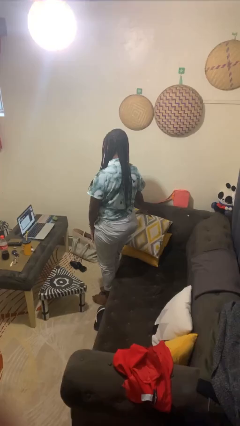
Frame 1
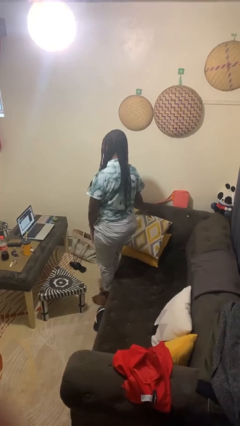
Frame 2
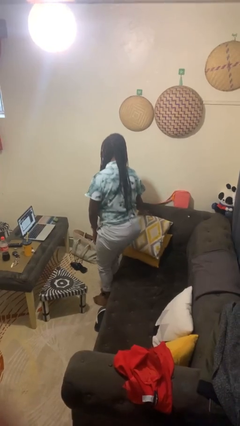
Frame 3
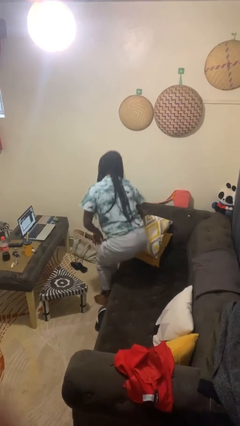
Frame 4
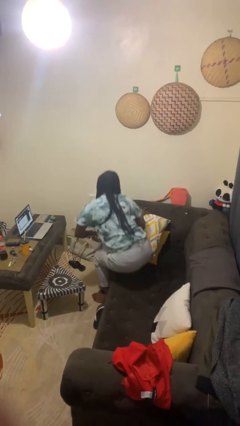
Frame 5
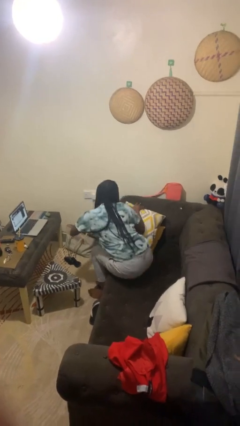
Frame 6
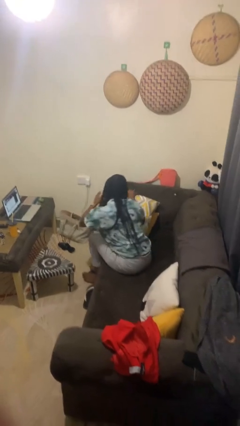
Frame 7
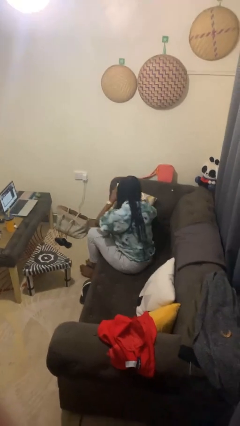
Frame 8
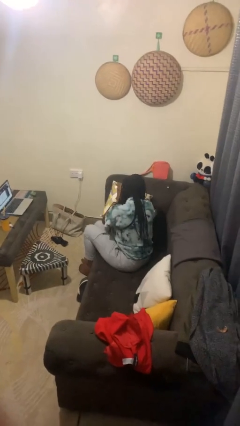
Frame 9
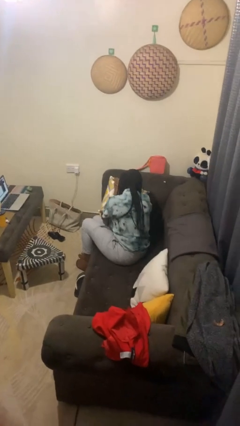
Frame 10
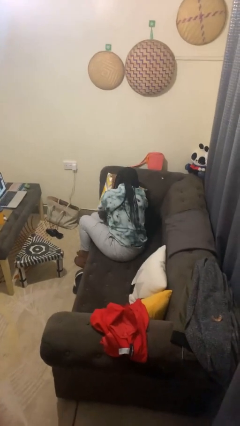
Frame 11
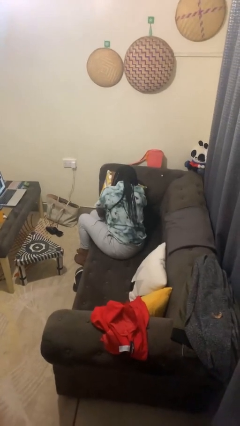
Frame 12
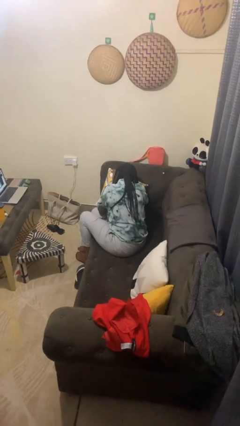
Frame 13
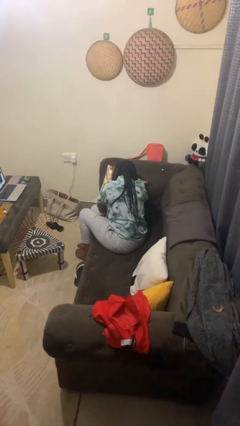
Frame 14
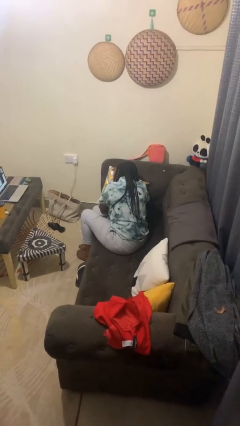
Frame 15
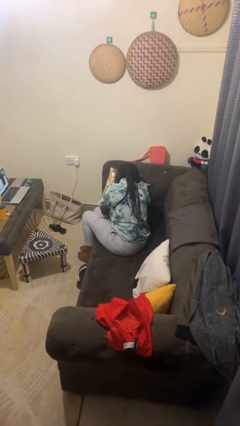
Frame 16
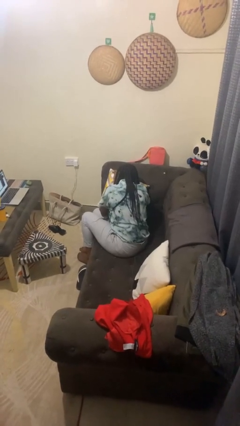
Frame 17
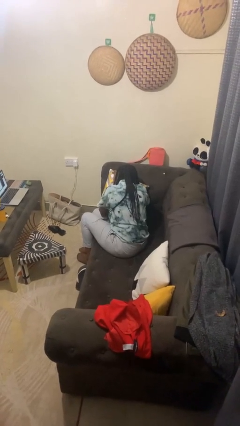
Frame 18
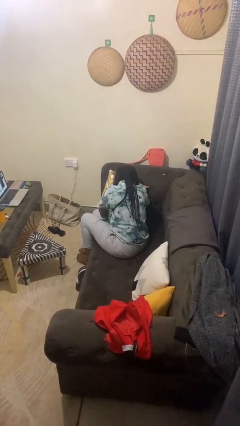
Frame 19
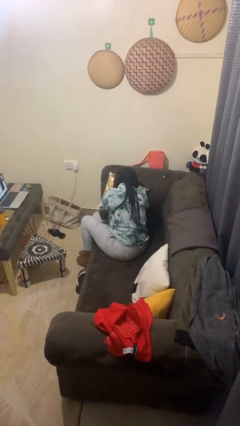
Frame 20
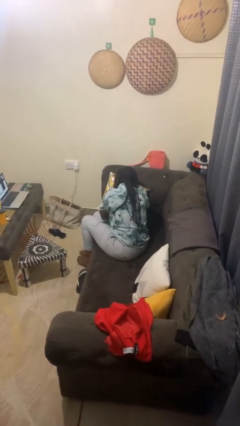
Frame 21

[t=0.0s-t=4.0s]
person lies down on couch

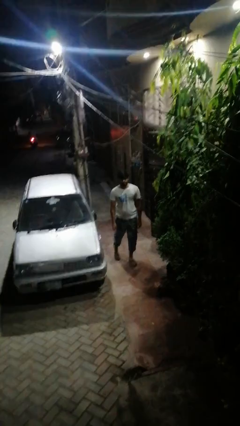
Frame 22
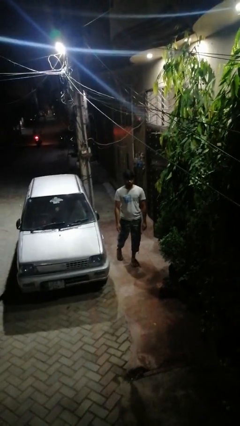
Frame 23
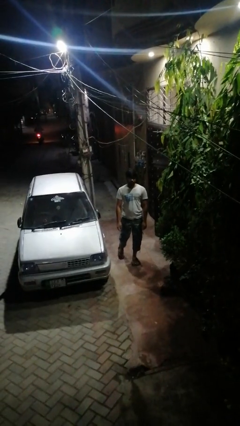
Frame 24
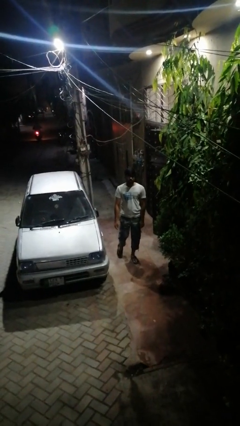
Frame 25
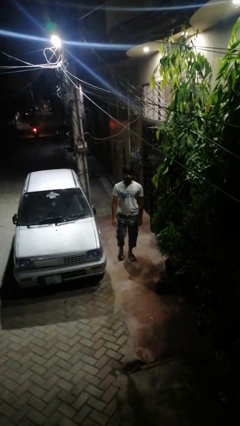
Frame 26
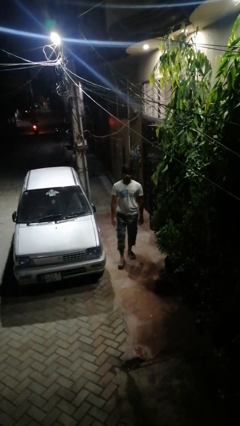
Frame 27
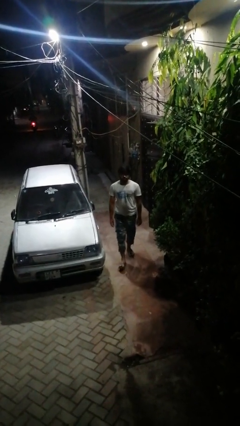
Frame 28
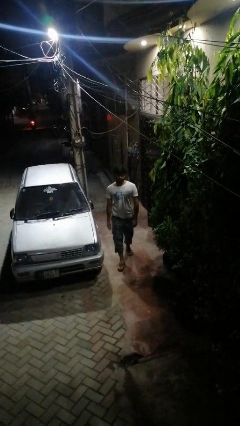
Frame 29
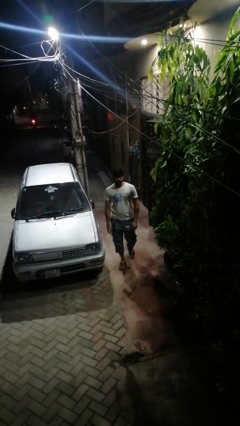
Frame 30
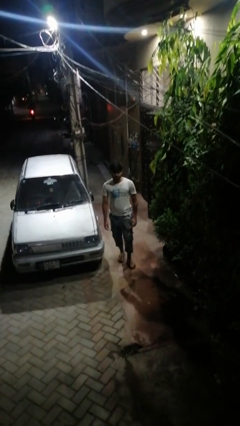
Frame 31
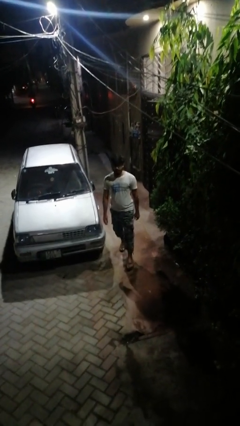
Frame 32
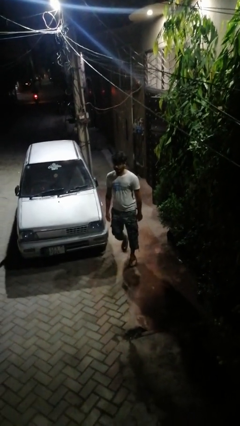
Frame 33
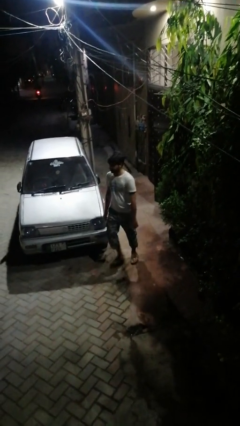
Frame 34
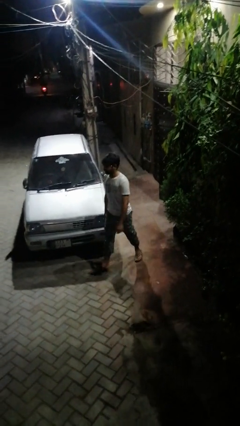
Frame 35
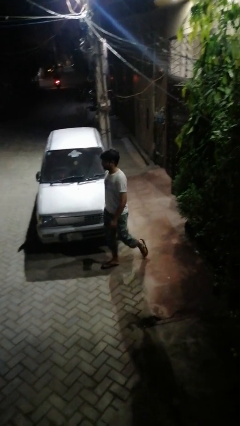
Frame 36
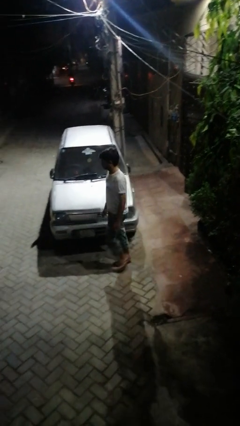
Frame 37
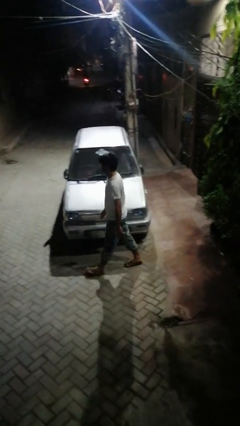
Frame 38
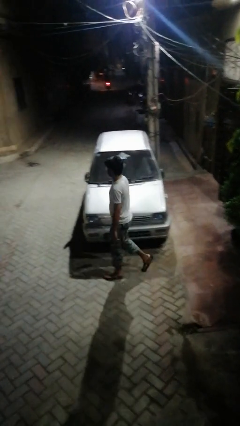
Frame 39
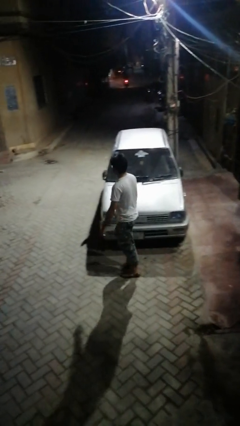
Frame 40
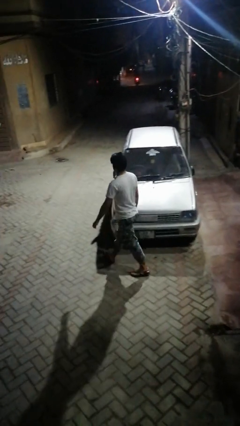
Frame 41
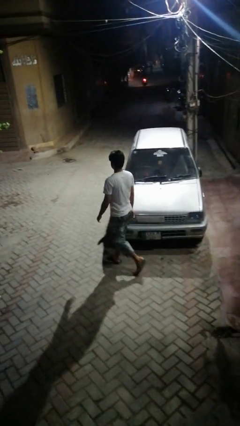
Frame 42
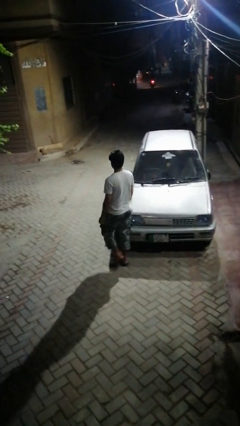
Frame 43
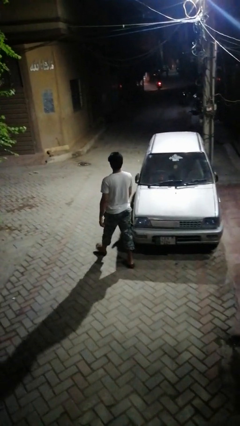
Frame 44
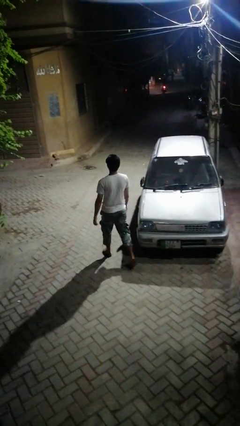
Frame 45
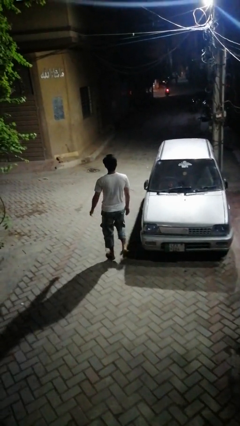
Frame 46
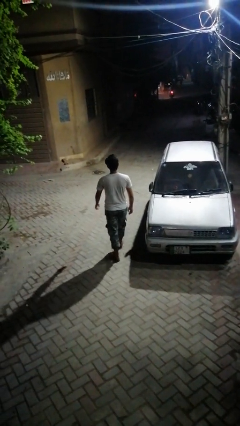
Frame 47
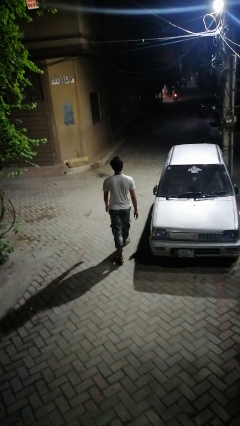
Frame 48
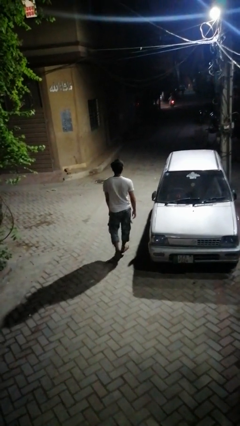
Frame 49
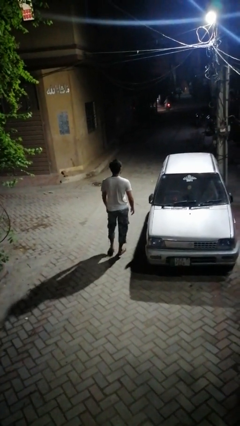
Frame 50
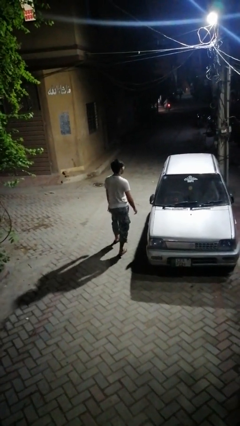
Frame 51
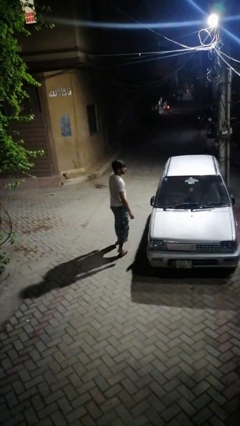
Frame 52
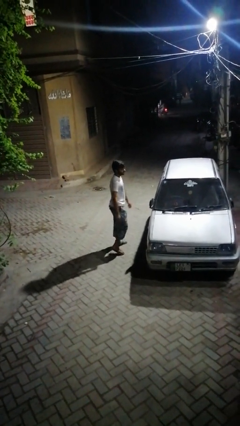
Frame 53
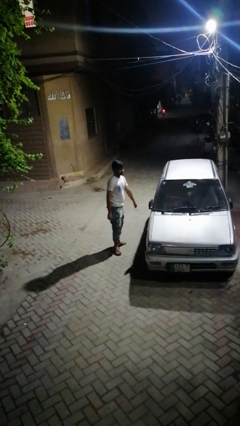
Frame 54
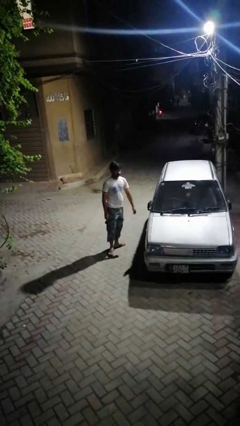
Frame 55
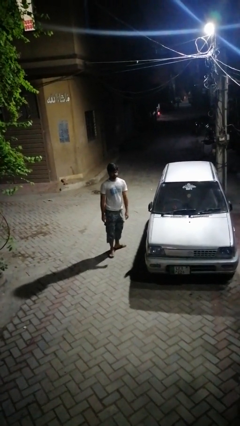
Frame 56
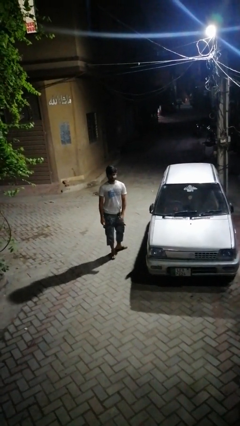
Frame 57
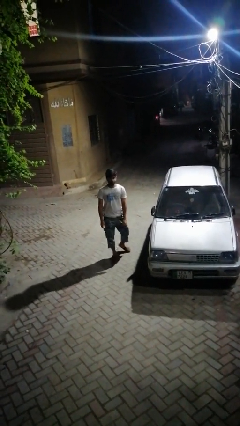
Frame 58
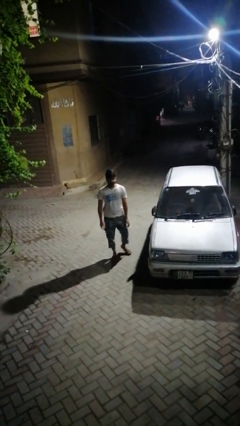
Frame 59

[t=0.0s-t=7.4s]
person walks around car

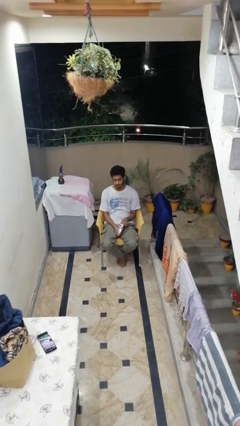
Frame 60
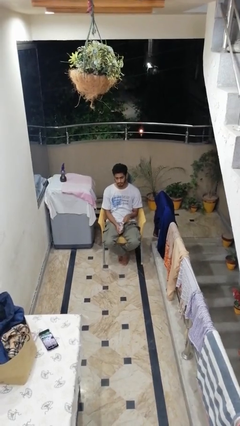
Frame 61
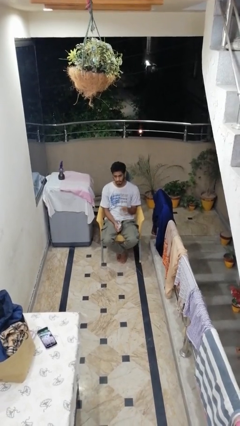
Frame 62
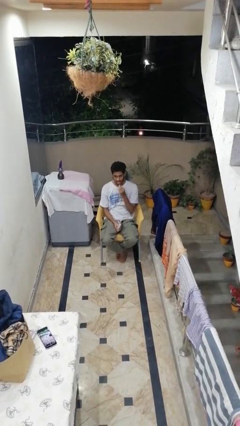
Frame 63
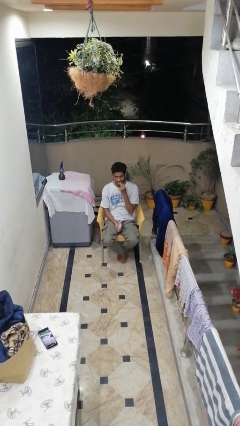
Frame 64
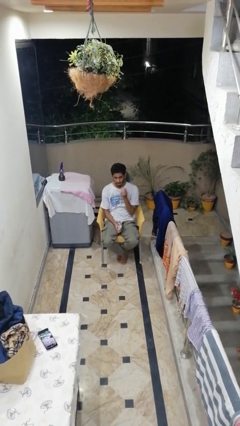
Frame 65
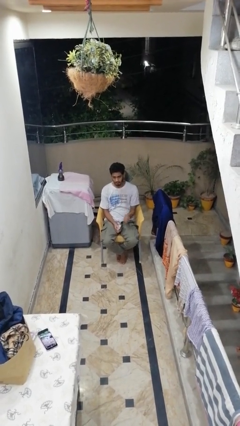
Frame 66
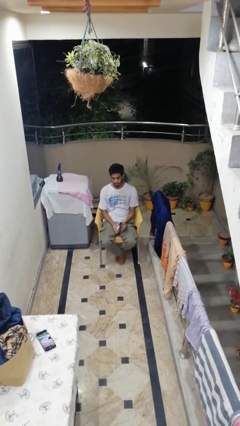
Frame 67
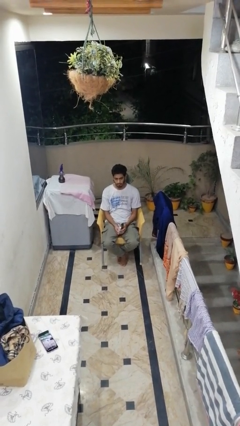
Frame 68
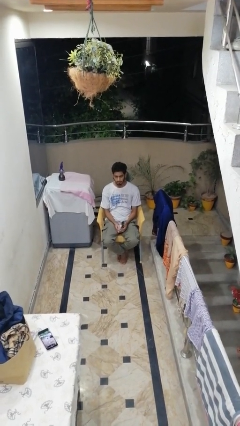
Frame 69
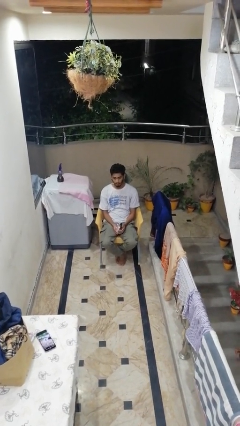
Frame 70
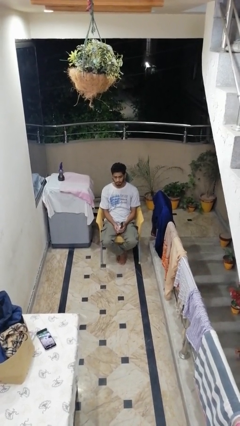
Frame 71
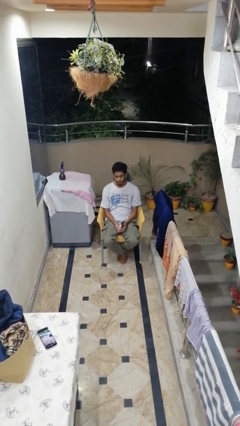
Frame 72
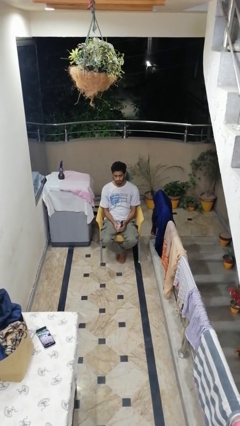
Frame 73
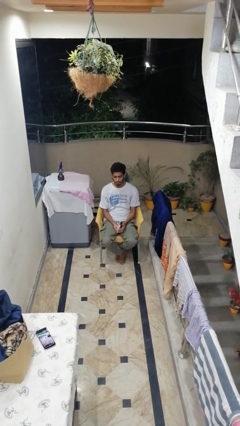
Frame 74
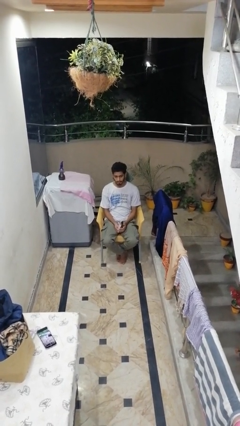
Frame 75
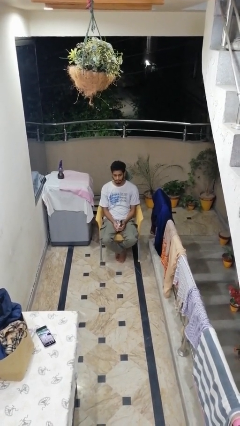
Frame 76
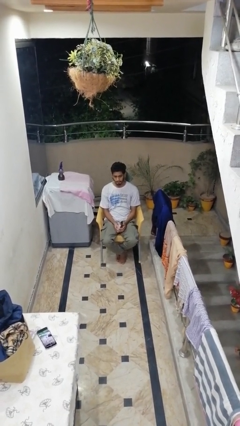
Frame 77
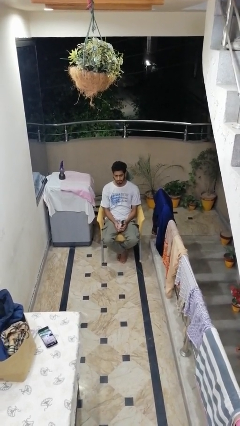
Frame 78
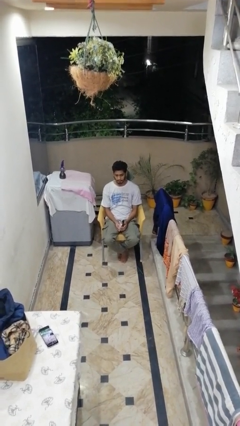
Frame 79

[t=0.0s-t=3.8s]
person eats snack from bag

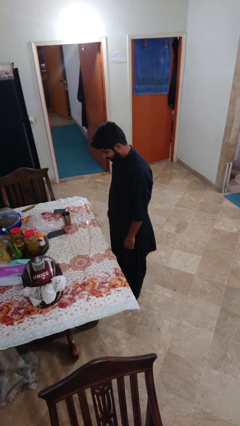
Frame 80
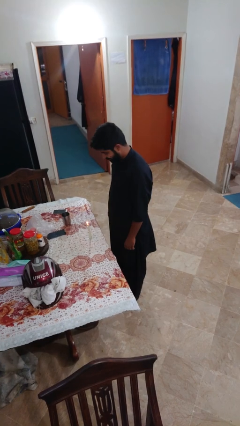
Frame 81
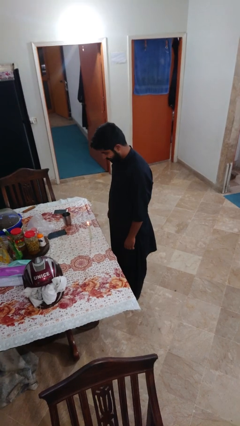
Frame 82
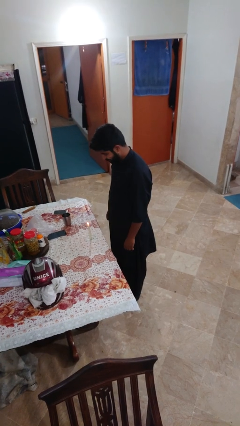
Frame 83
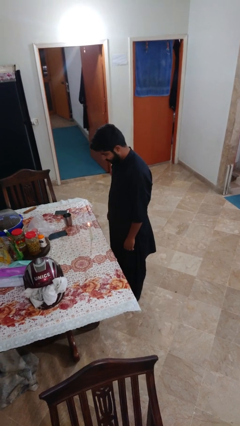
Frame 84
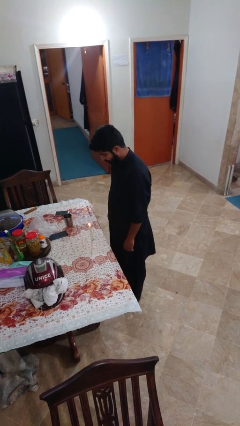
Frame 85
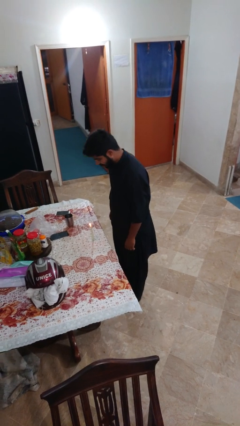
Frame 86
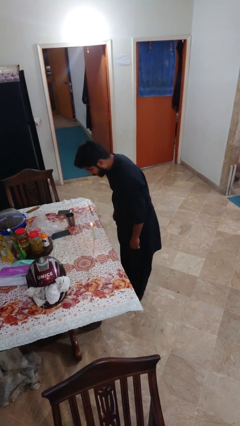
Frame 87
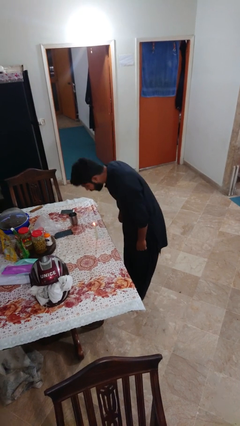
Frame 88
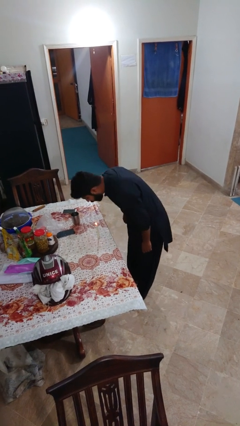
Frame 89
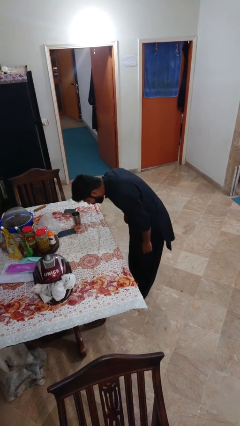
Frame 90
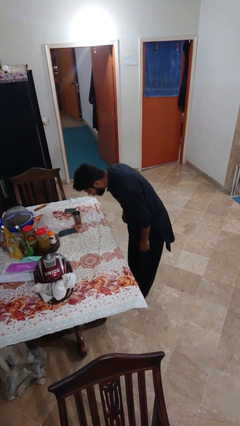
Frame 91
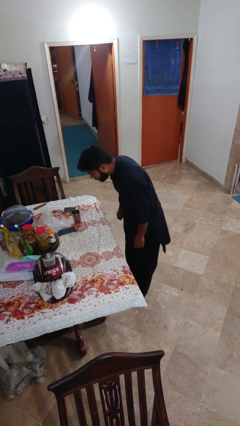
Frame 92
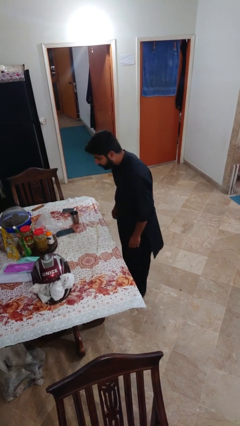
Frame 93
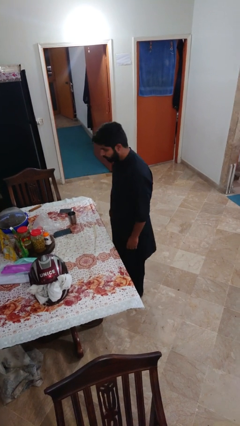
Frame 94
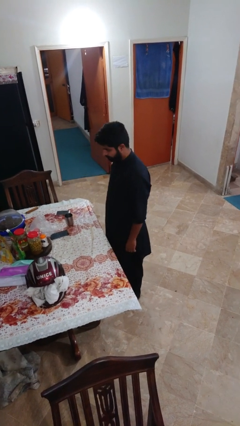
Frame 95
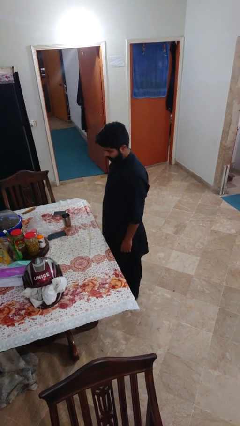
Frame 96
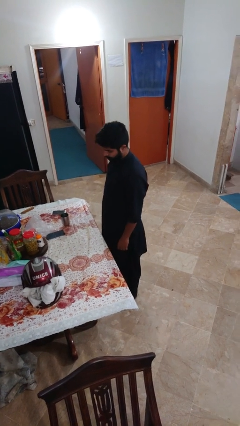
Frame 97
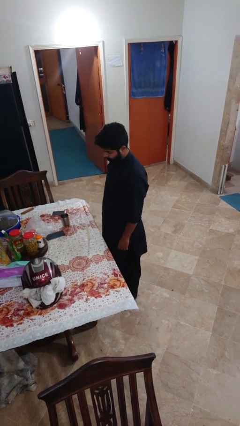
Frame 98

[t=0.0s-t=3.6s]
person extinguishes candle
